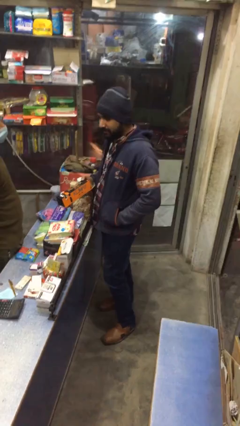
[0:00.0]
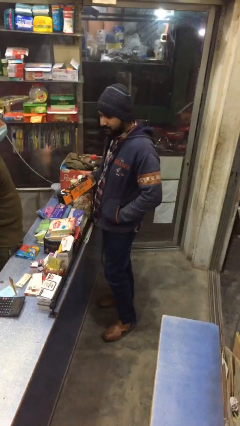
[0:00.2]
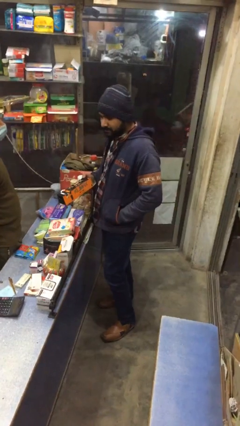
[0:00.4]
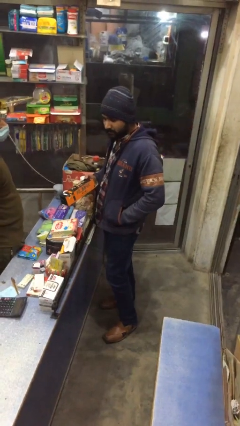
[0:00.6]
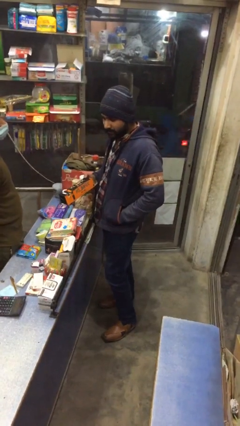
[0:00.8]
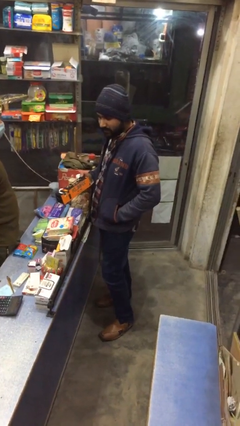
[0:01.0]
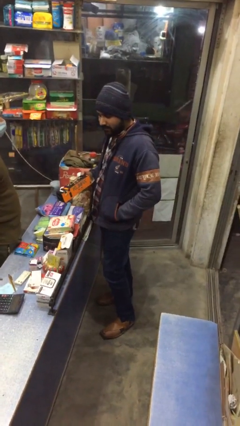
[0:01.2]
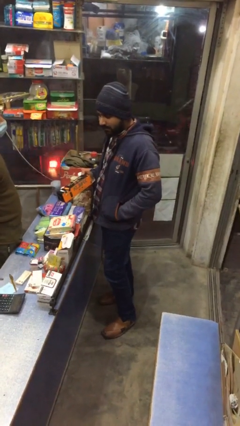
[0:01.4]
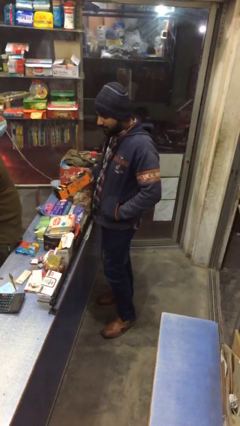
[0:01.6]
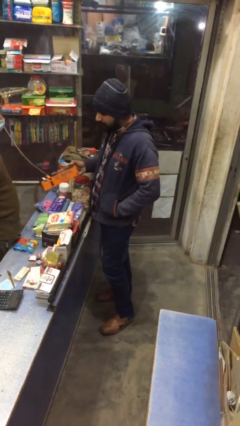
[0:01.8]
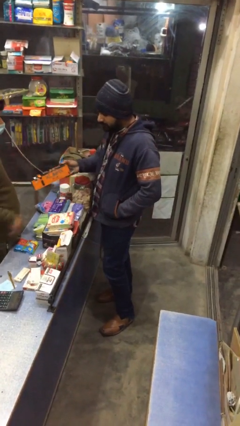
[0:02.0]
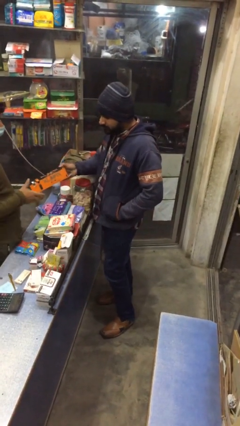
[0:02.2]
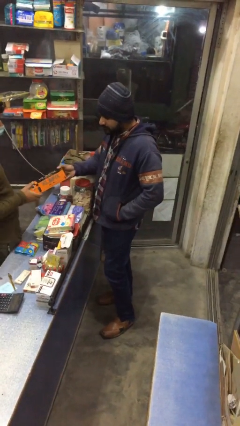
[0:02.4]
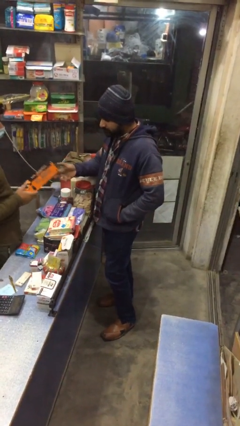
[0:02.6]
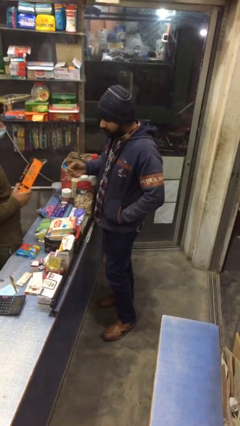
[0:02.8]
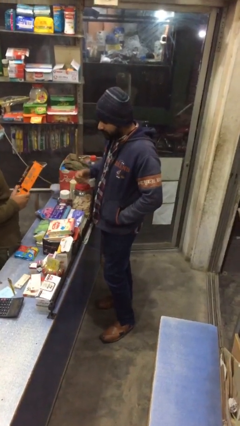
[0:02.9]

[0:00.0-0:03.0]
person transfers object to person

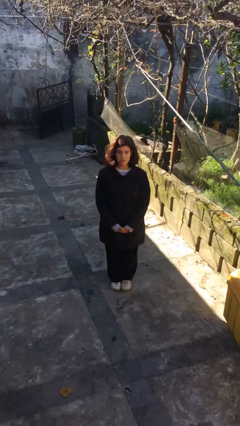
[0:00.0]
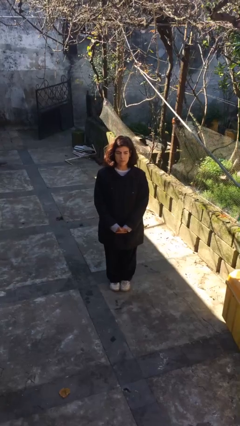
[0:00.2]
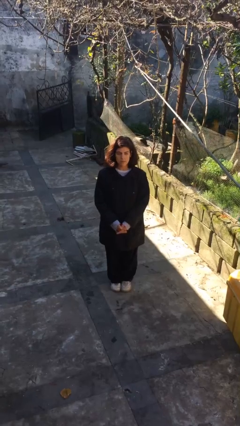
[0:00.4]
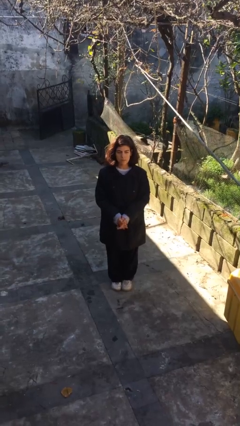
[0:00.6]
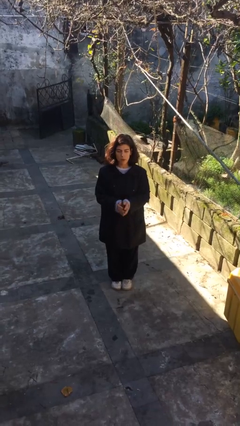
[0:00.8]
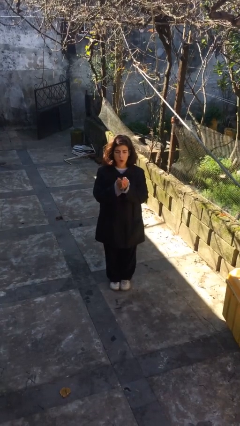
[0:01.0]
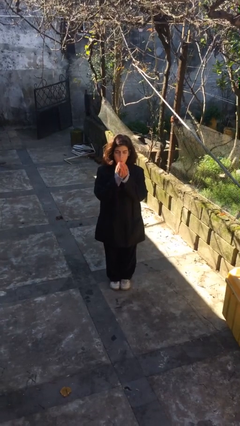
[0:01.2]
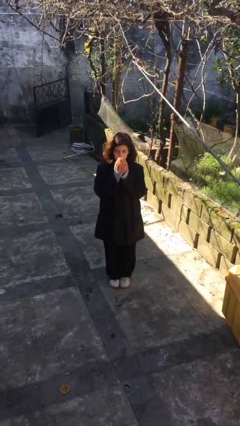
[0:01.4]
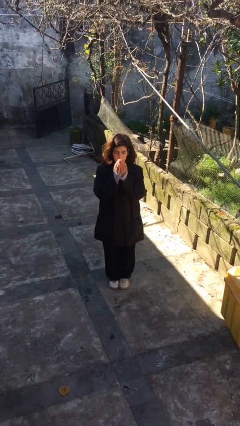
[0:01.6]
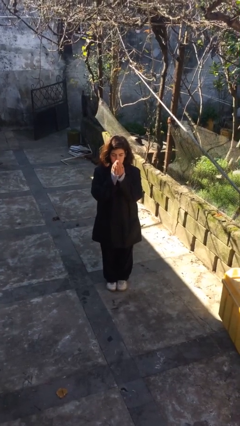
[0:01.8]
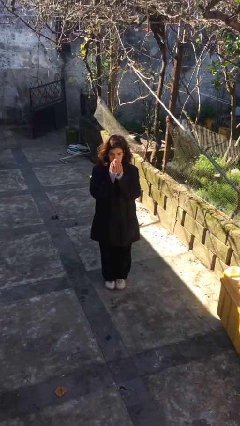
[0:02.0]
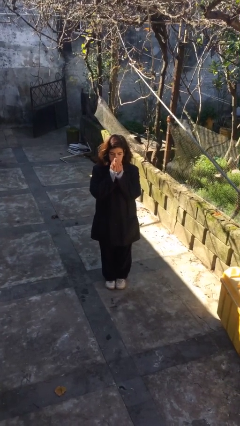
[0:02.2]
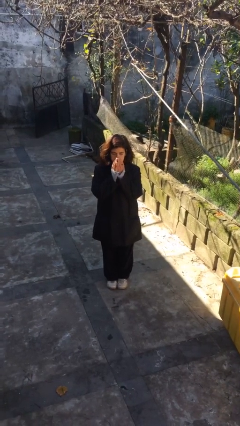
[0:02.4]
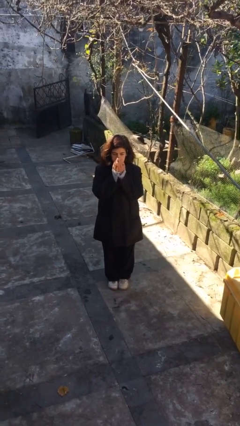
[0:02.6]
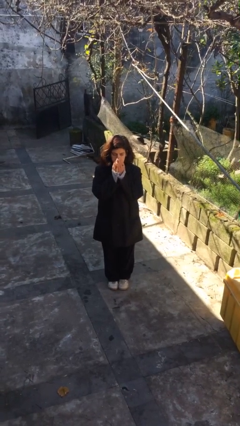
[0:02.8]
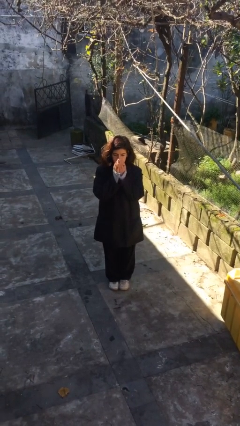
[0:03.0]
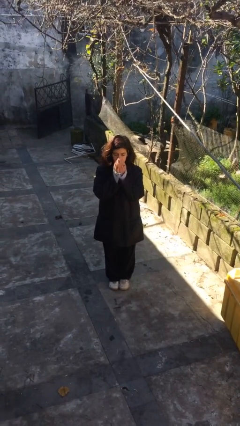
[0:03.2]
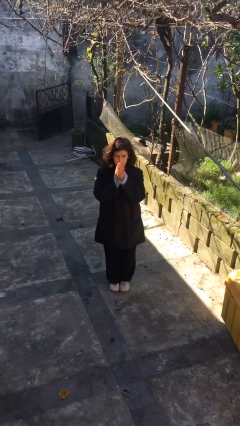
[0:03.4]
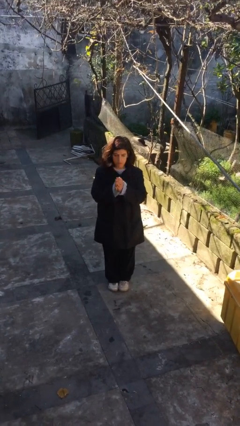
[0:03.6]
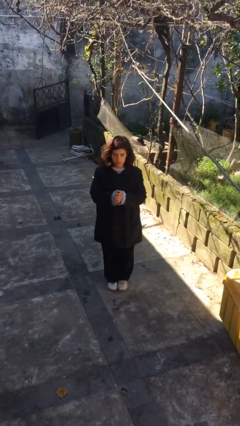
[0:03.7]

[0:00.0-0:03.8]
person blows into hands

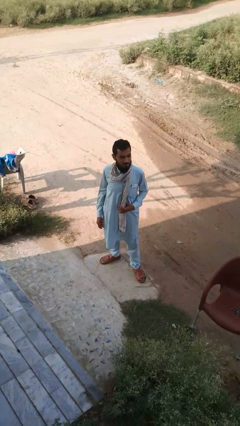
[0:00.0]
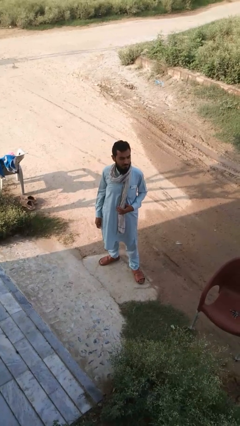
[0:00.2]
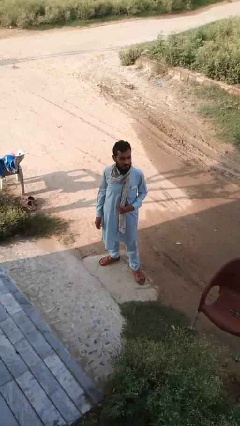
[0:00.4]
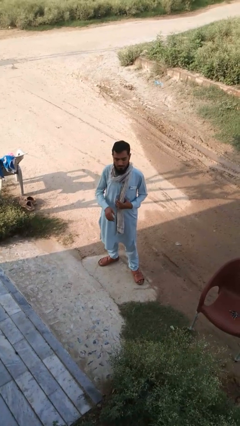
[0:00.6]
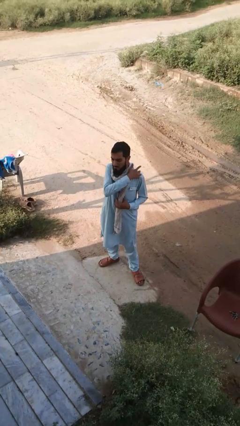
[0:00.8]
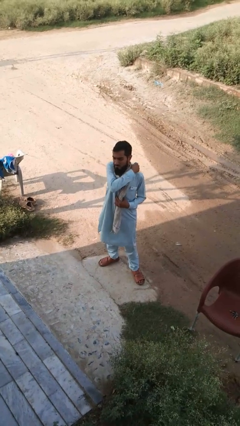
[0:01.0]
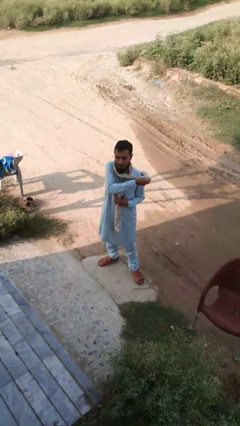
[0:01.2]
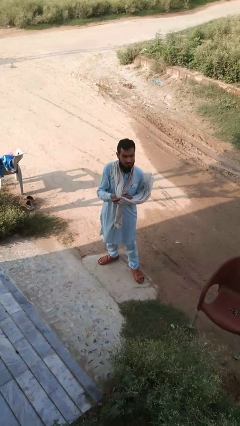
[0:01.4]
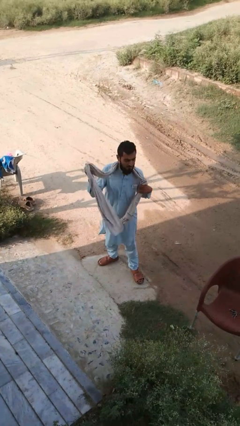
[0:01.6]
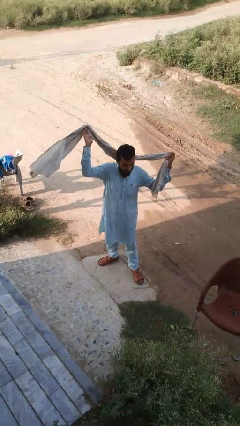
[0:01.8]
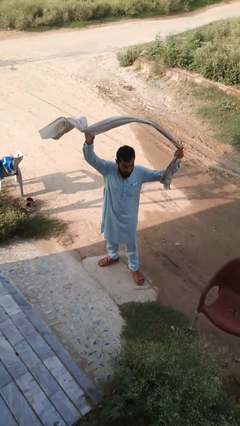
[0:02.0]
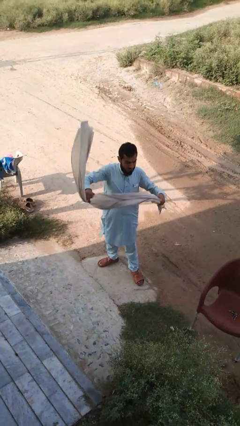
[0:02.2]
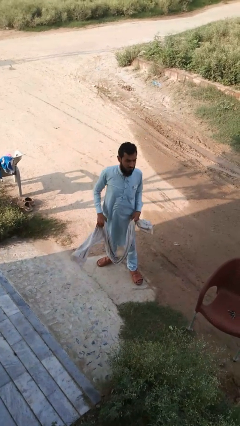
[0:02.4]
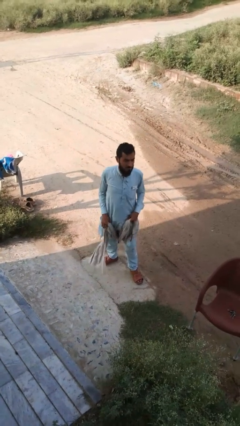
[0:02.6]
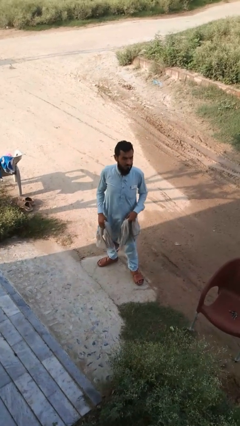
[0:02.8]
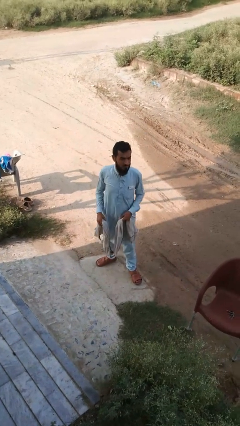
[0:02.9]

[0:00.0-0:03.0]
person takes off scarf

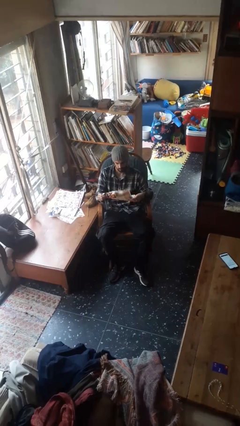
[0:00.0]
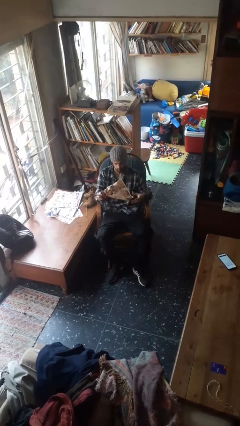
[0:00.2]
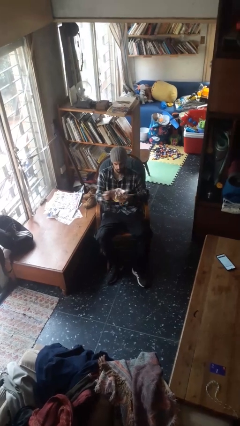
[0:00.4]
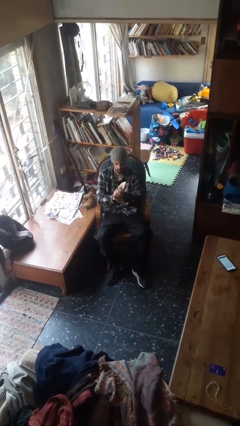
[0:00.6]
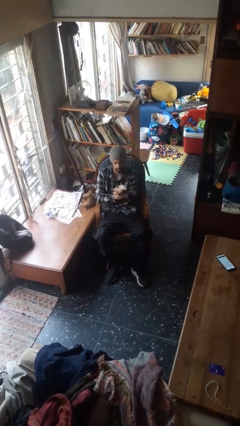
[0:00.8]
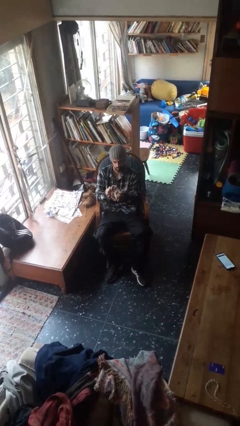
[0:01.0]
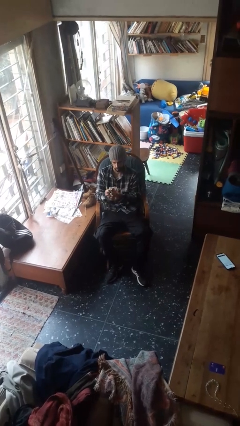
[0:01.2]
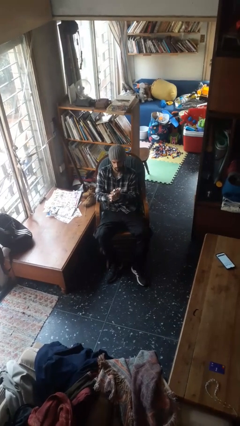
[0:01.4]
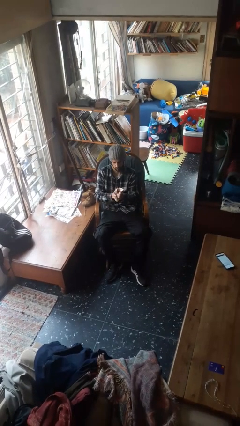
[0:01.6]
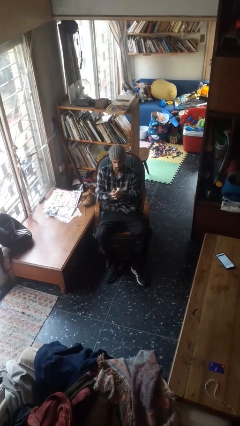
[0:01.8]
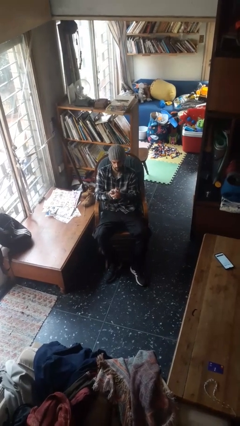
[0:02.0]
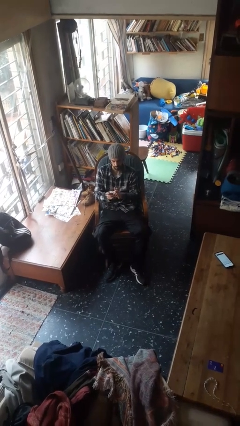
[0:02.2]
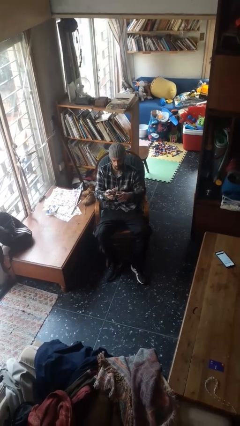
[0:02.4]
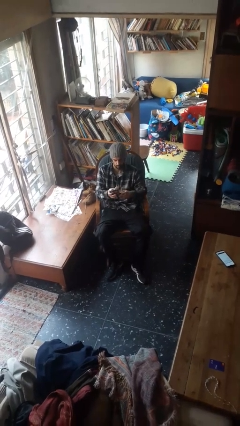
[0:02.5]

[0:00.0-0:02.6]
person crumples paper

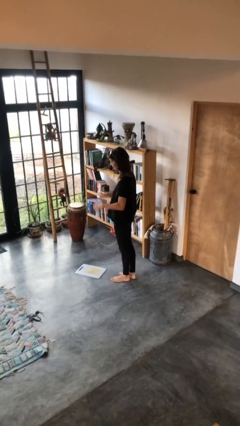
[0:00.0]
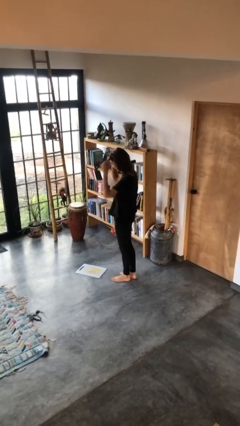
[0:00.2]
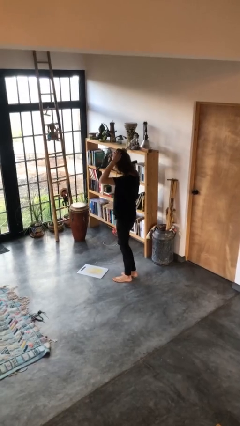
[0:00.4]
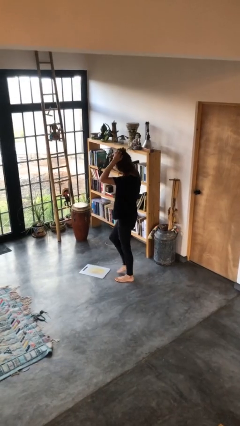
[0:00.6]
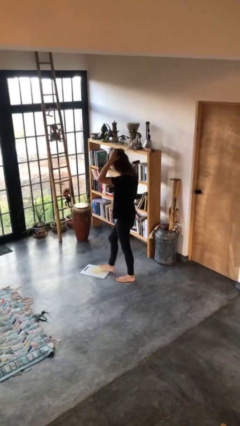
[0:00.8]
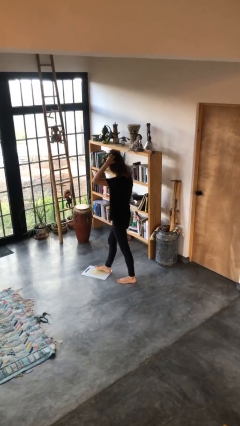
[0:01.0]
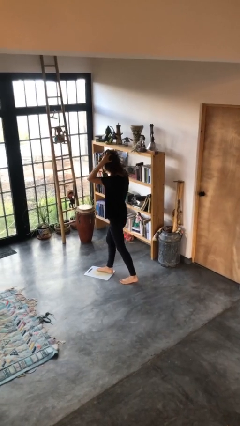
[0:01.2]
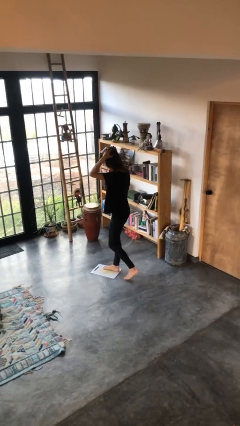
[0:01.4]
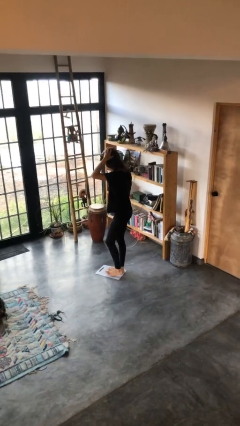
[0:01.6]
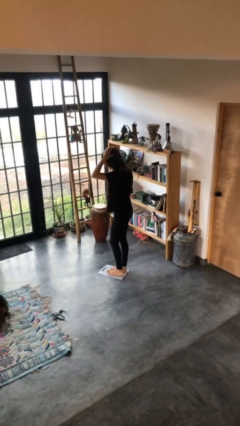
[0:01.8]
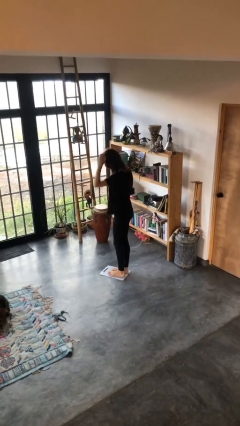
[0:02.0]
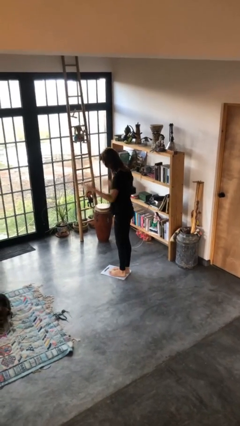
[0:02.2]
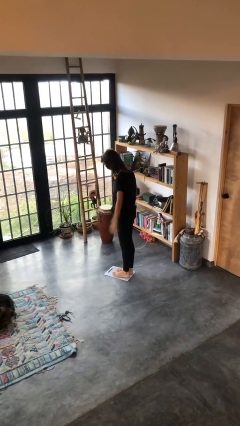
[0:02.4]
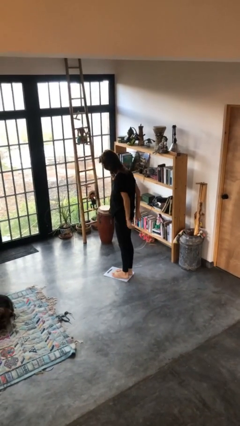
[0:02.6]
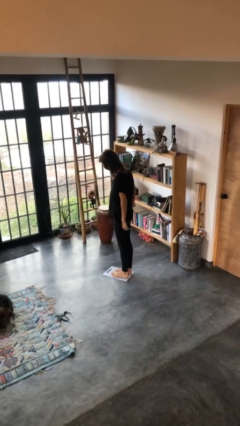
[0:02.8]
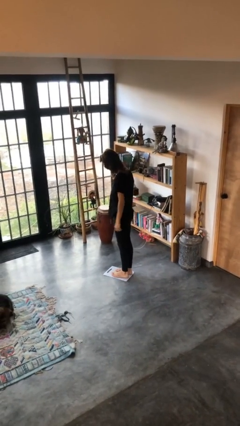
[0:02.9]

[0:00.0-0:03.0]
person uses bodyweight scale

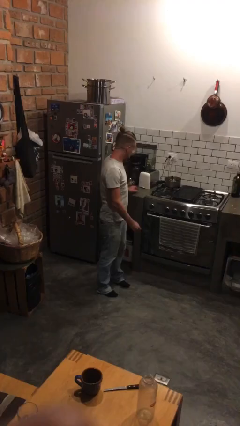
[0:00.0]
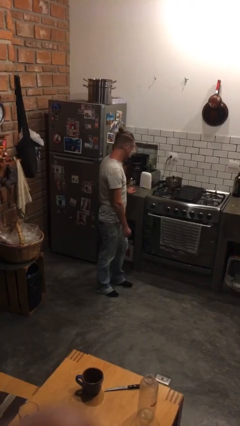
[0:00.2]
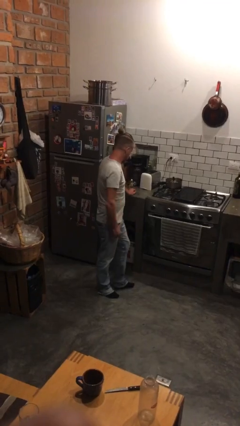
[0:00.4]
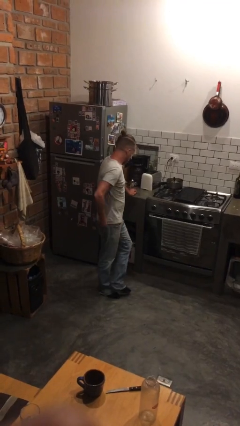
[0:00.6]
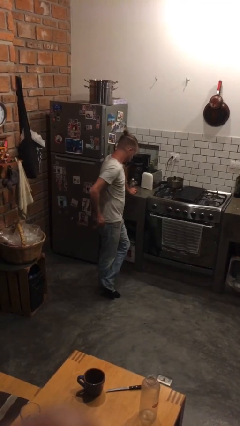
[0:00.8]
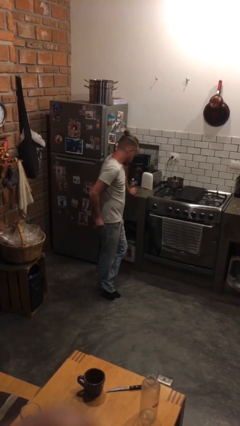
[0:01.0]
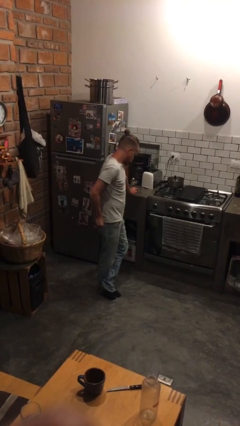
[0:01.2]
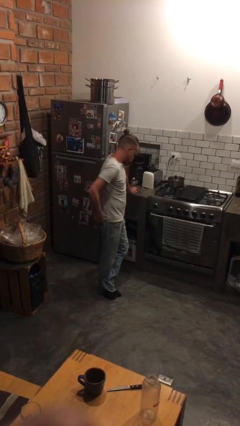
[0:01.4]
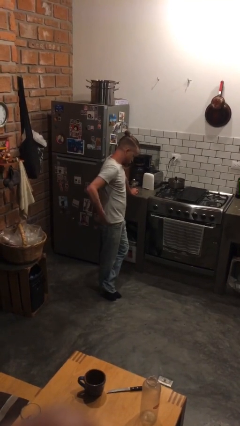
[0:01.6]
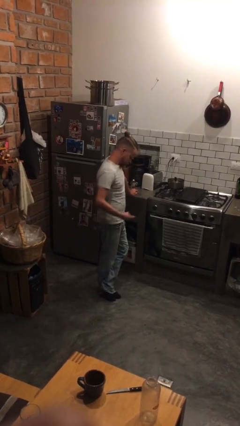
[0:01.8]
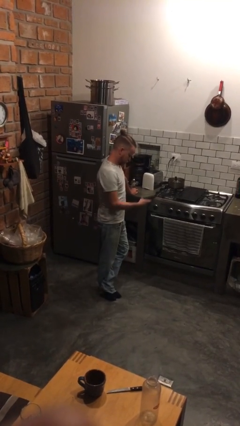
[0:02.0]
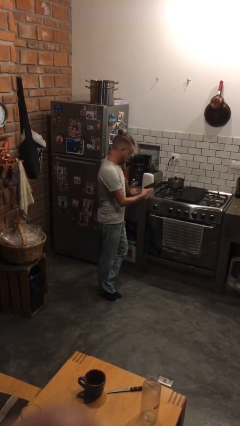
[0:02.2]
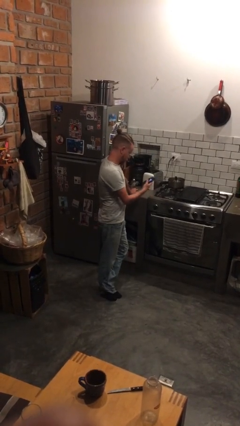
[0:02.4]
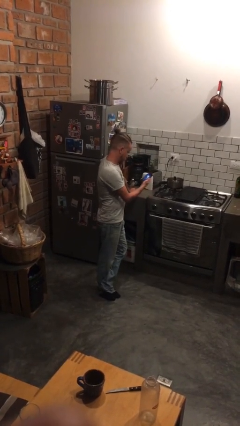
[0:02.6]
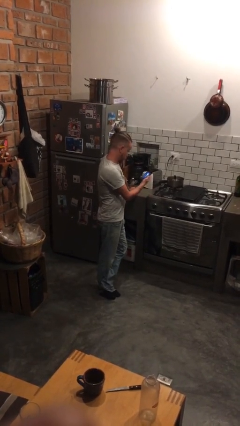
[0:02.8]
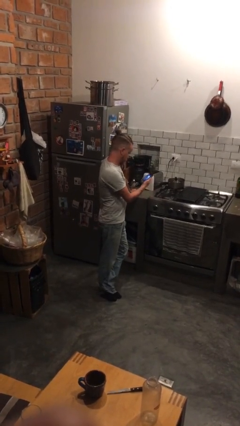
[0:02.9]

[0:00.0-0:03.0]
person takes phone from pocket
